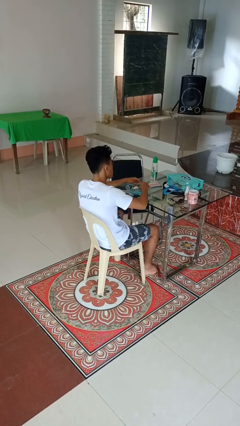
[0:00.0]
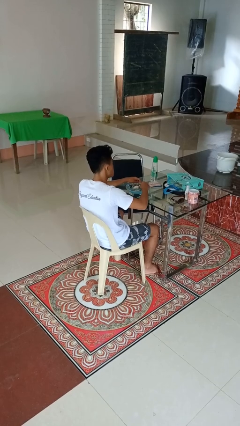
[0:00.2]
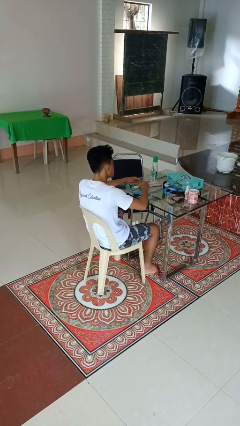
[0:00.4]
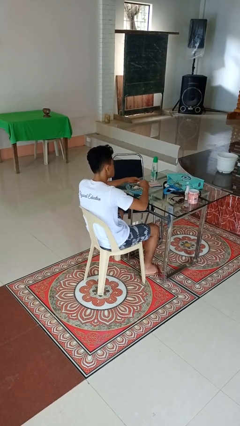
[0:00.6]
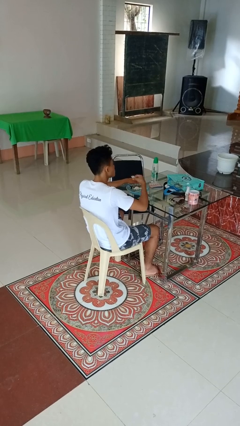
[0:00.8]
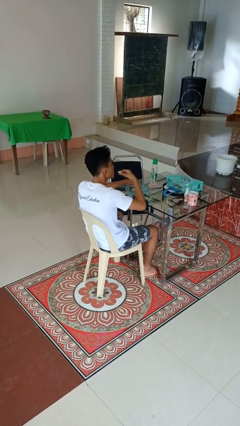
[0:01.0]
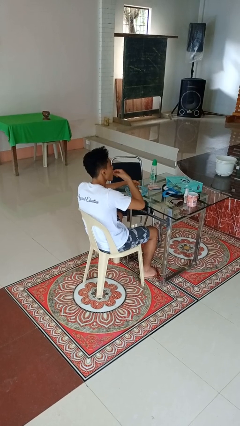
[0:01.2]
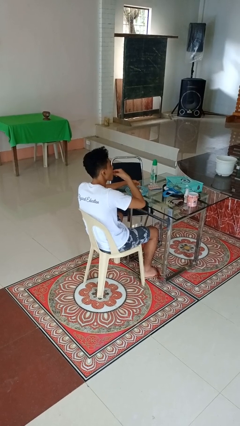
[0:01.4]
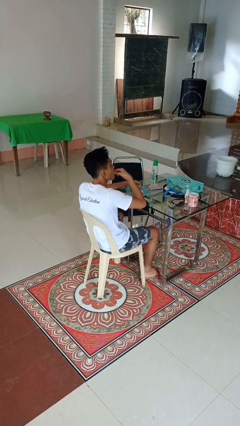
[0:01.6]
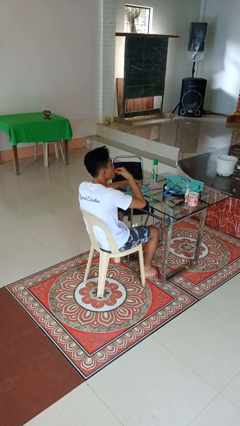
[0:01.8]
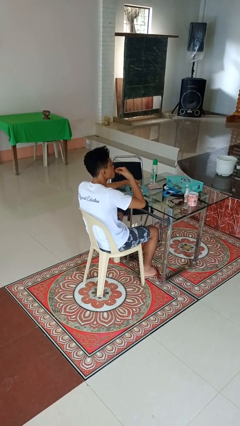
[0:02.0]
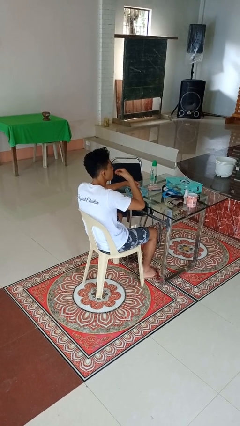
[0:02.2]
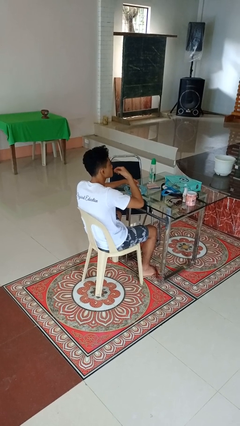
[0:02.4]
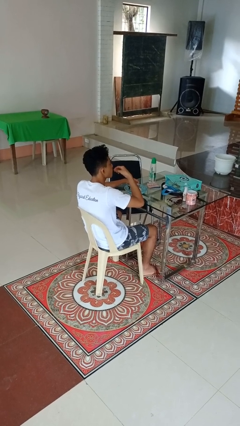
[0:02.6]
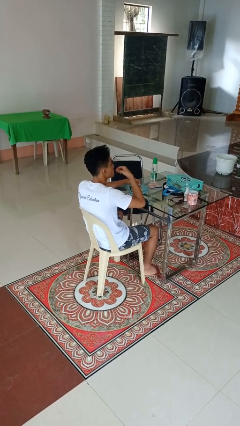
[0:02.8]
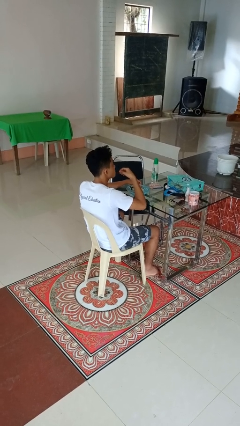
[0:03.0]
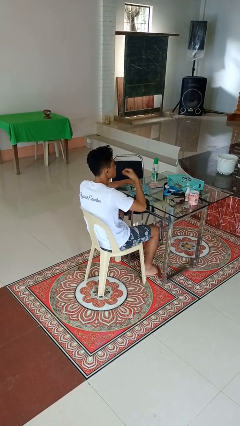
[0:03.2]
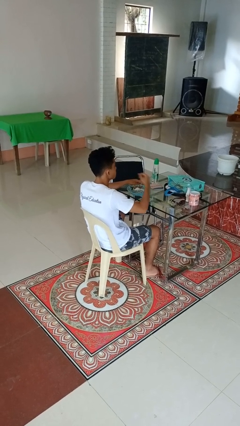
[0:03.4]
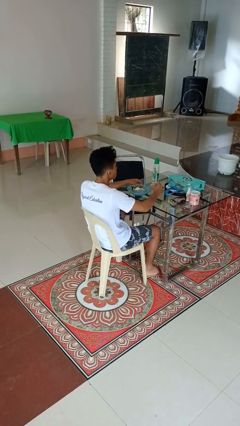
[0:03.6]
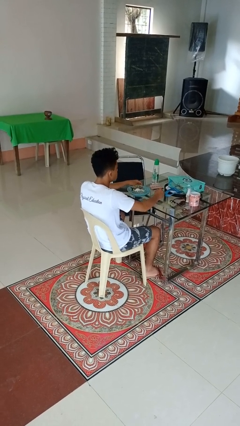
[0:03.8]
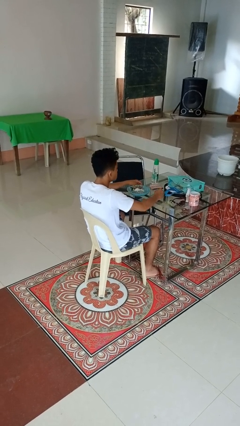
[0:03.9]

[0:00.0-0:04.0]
person eats with hands

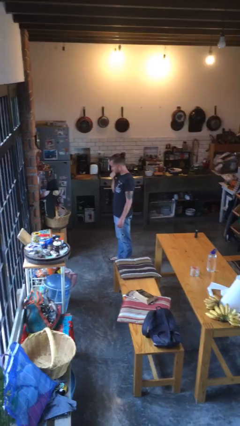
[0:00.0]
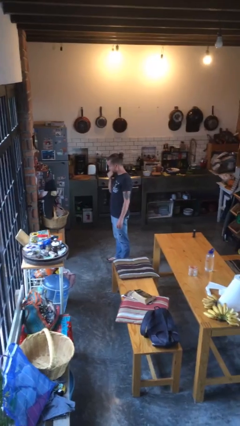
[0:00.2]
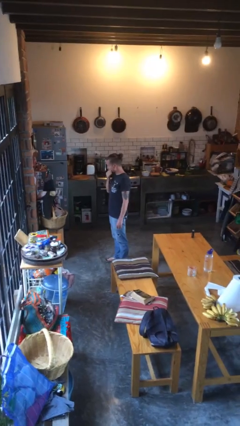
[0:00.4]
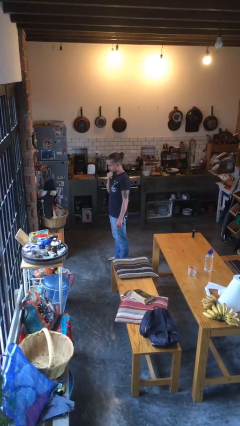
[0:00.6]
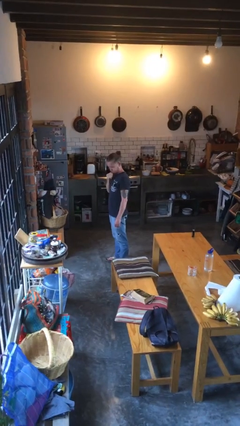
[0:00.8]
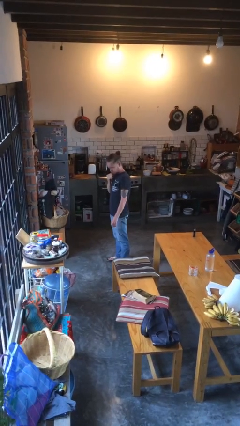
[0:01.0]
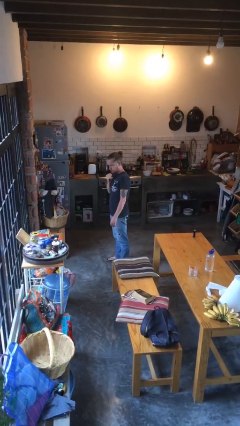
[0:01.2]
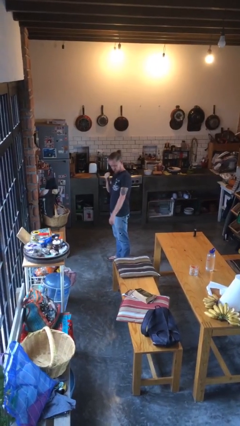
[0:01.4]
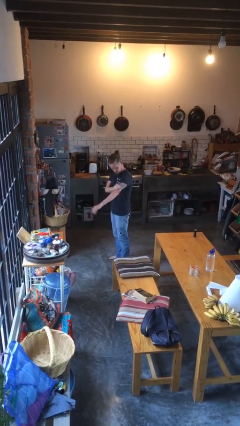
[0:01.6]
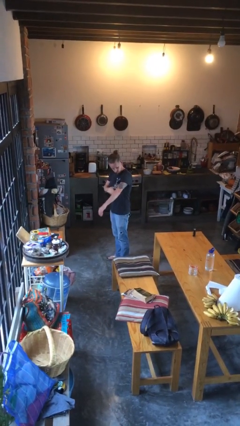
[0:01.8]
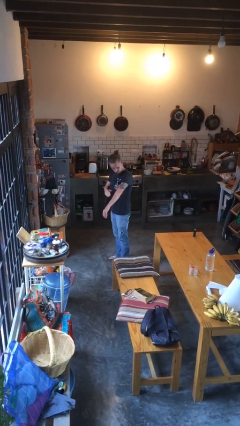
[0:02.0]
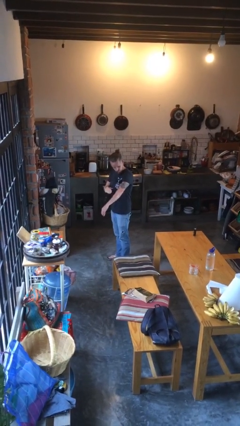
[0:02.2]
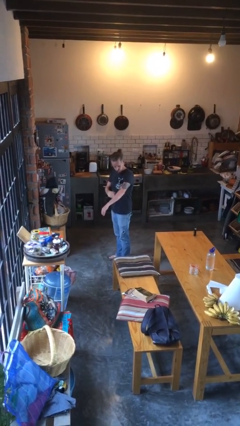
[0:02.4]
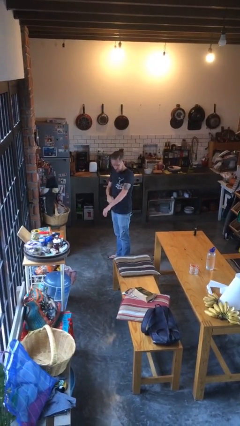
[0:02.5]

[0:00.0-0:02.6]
person swats bug

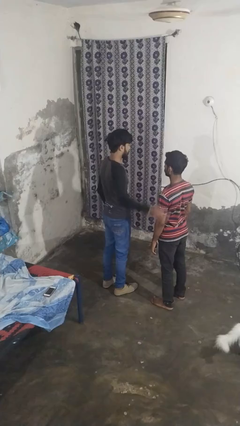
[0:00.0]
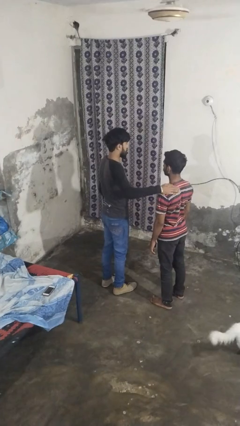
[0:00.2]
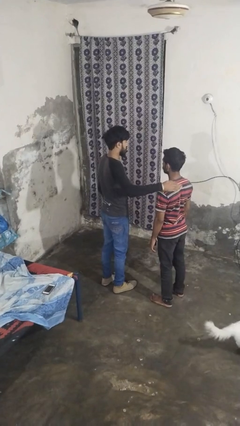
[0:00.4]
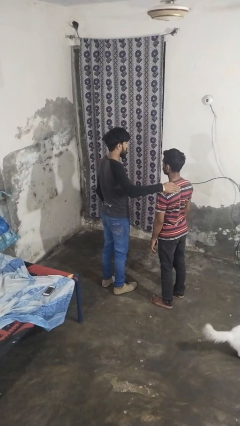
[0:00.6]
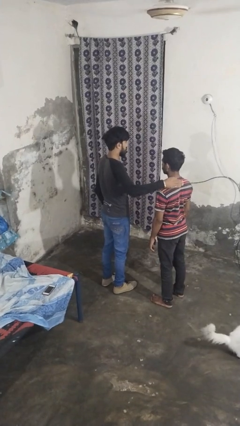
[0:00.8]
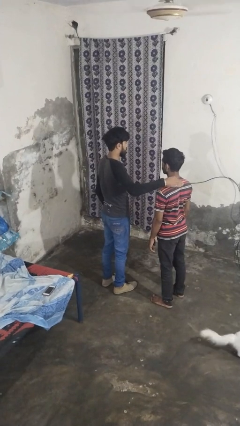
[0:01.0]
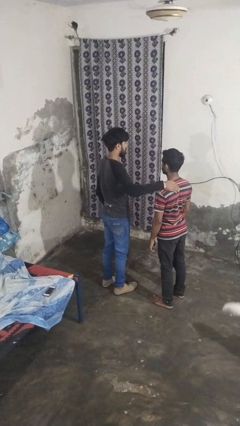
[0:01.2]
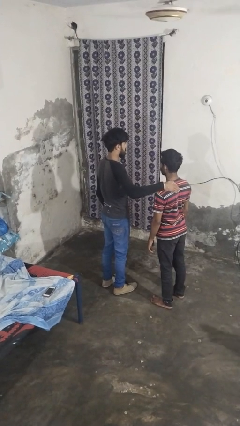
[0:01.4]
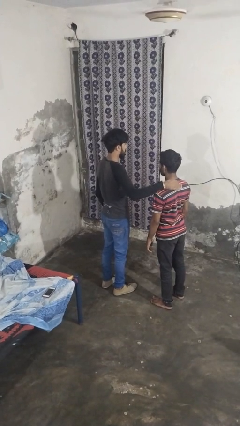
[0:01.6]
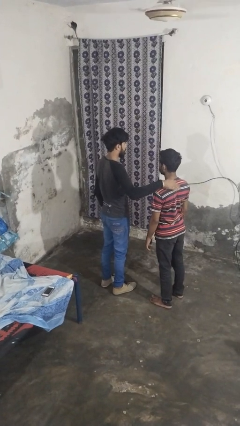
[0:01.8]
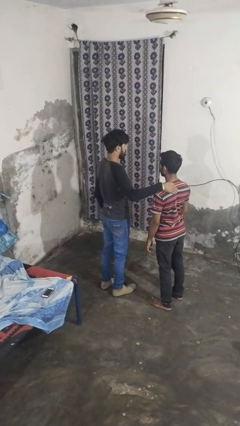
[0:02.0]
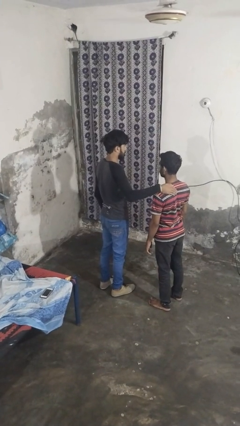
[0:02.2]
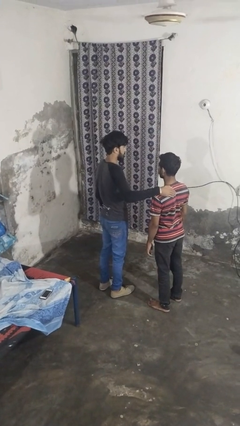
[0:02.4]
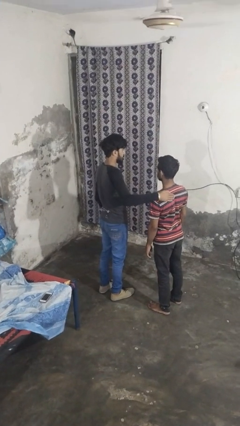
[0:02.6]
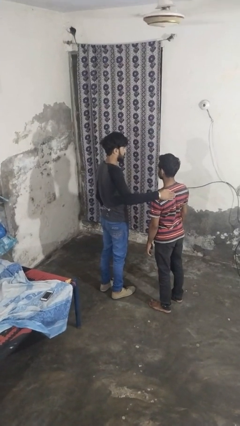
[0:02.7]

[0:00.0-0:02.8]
person pounds shoulders of person

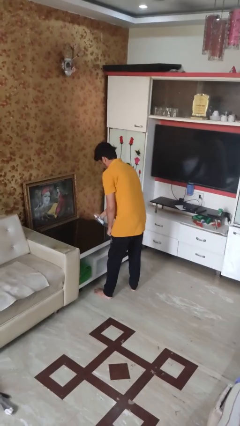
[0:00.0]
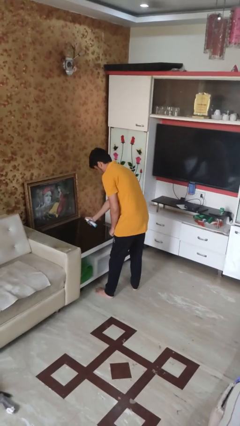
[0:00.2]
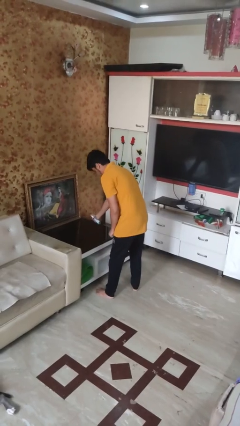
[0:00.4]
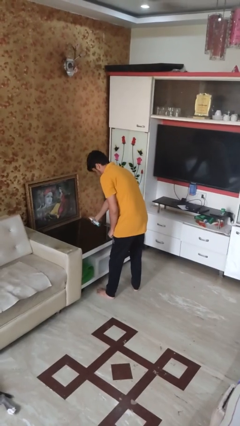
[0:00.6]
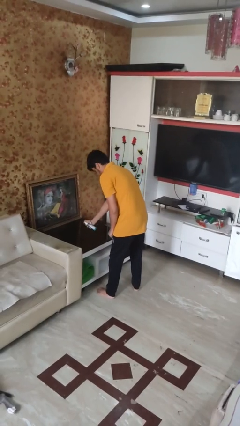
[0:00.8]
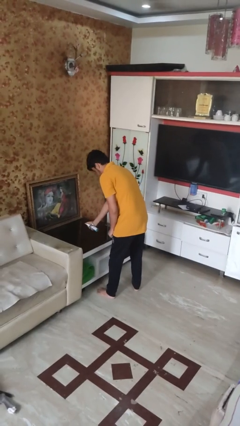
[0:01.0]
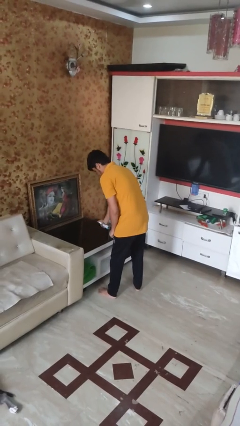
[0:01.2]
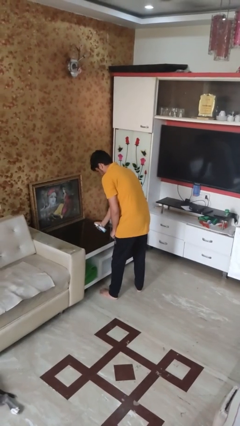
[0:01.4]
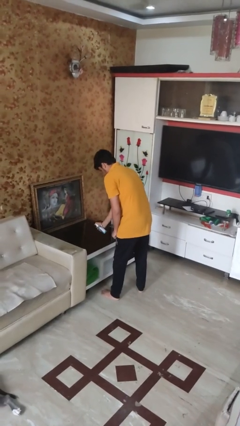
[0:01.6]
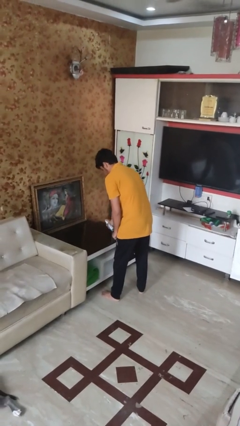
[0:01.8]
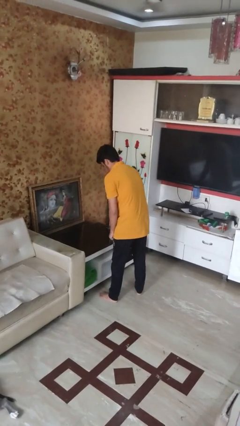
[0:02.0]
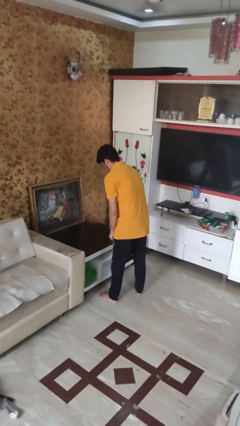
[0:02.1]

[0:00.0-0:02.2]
person sprays from bottle

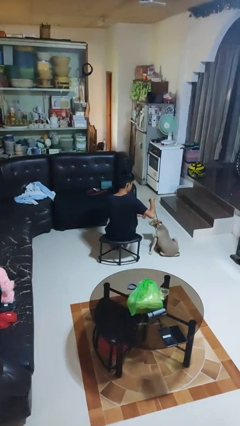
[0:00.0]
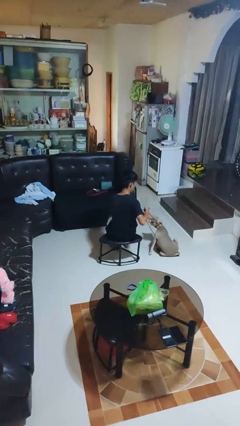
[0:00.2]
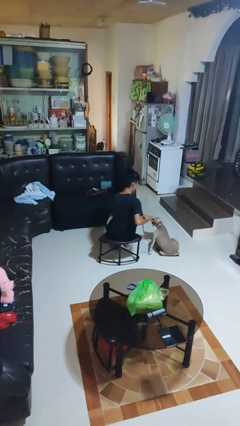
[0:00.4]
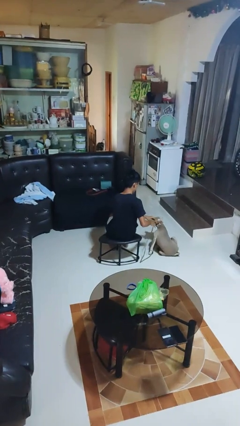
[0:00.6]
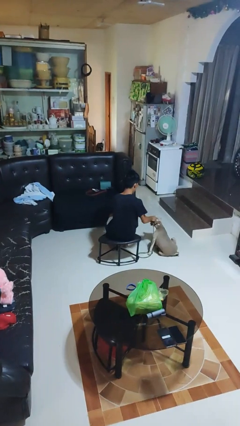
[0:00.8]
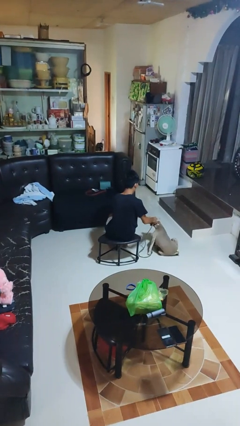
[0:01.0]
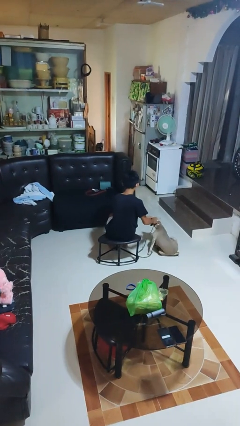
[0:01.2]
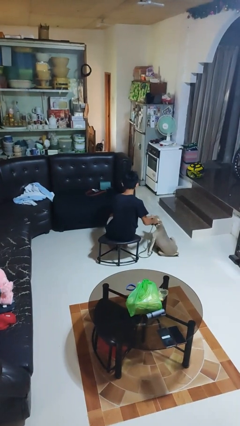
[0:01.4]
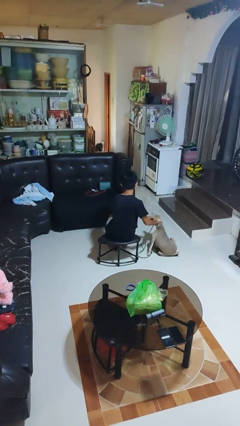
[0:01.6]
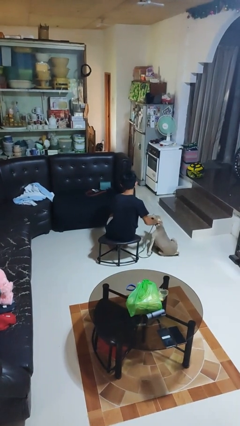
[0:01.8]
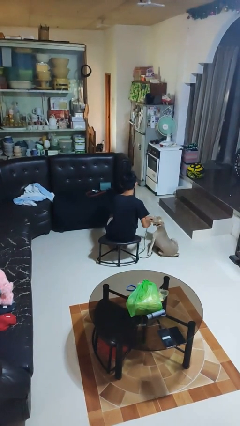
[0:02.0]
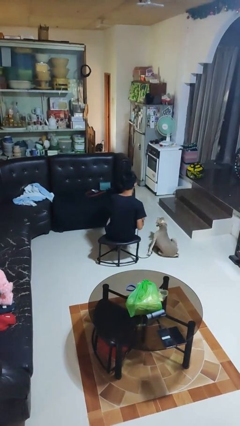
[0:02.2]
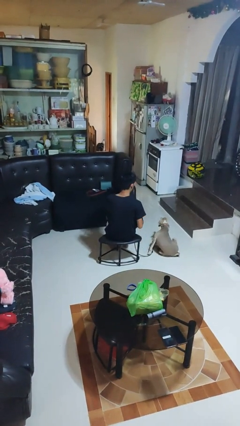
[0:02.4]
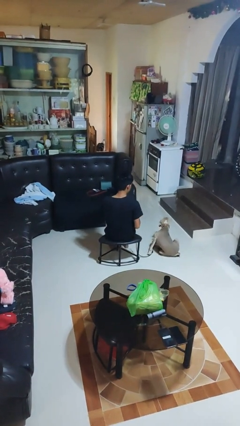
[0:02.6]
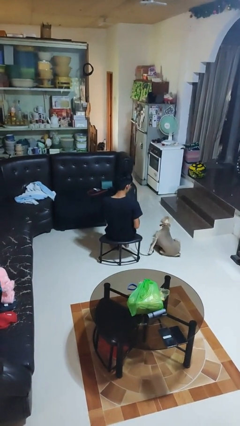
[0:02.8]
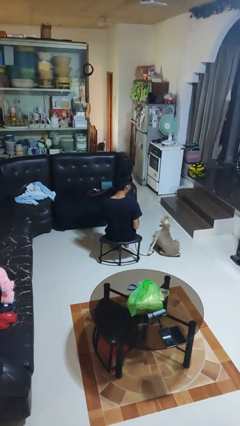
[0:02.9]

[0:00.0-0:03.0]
person unattaches leash from dog

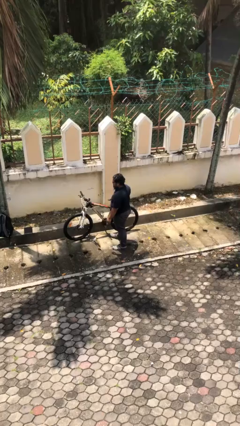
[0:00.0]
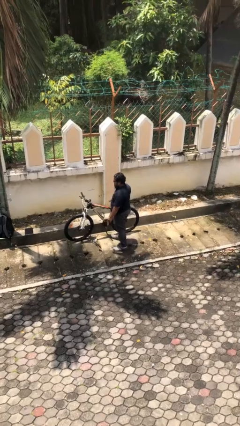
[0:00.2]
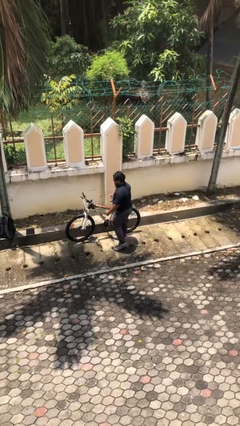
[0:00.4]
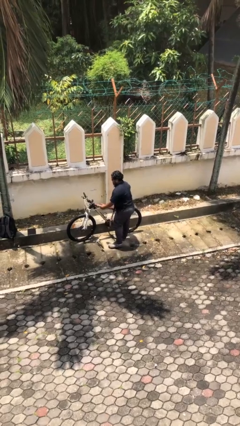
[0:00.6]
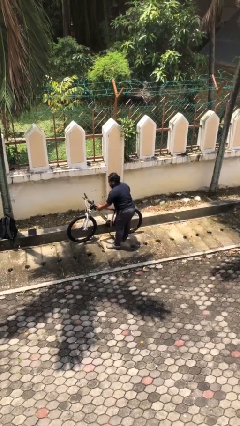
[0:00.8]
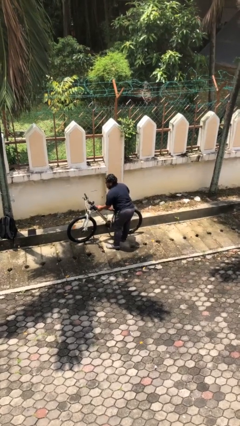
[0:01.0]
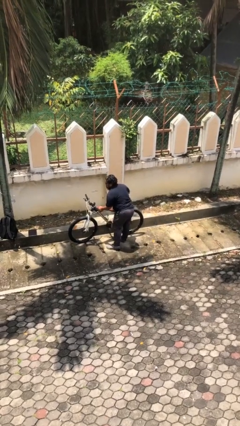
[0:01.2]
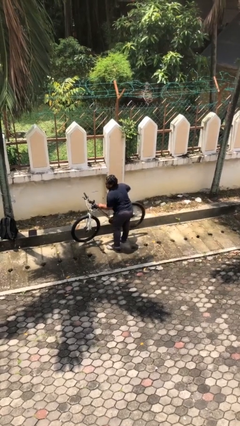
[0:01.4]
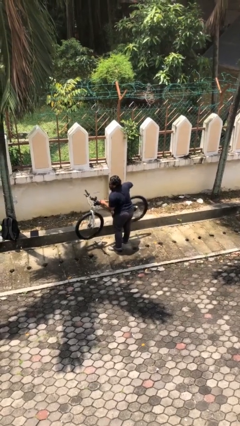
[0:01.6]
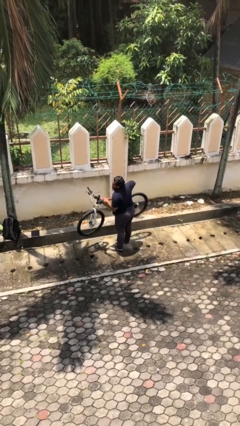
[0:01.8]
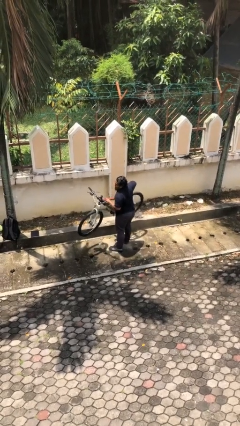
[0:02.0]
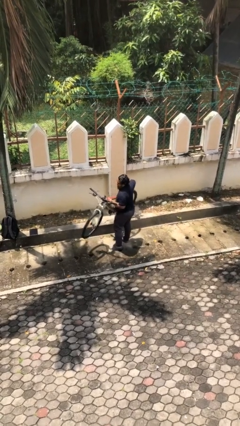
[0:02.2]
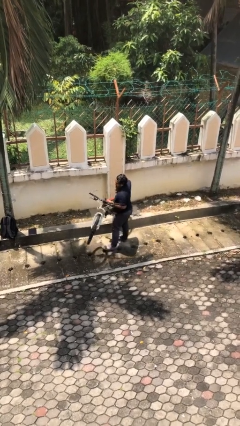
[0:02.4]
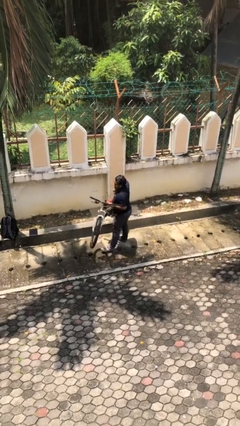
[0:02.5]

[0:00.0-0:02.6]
person picks up object from floor

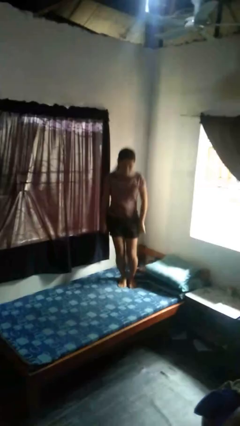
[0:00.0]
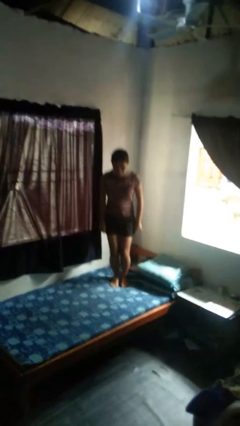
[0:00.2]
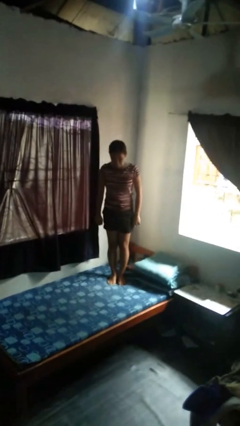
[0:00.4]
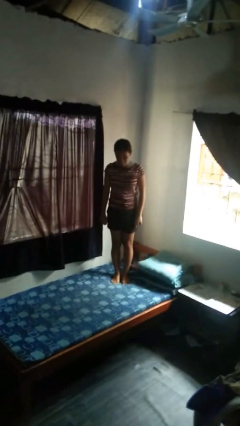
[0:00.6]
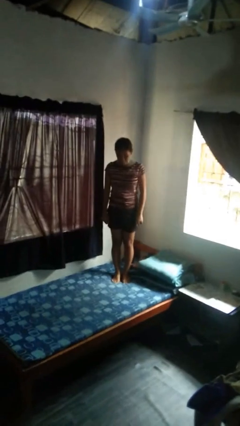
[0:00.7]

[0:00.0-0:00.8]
person jumps on bed
